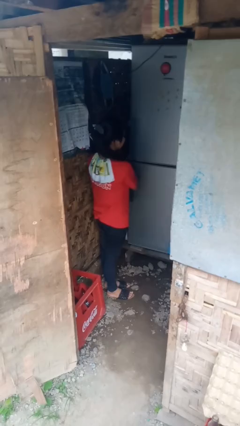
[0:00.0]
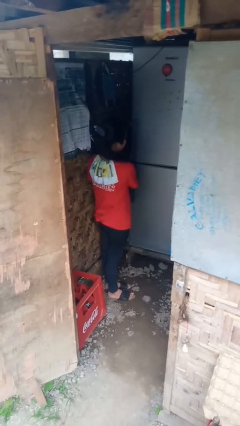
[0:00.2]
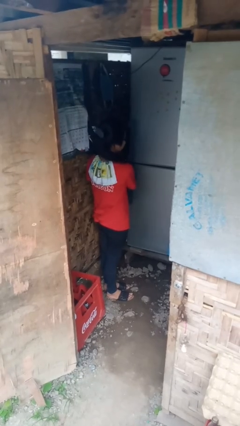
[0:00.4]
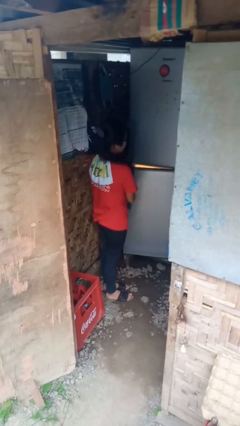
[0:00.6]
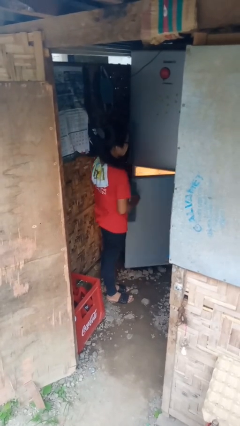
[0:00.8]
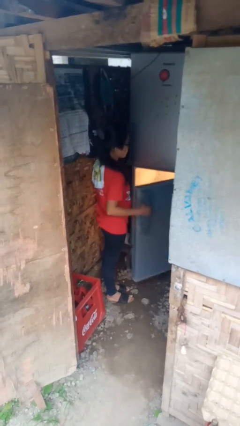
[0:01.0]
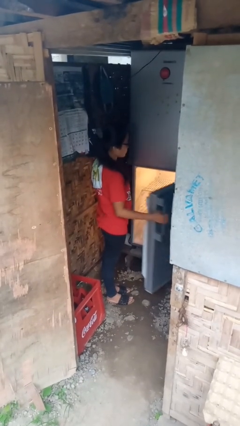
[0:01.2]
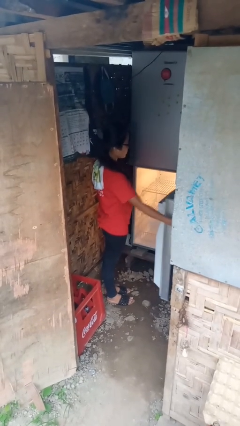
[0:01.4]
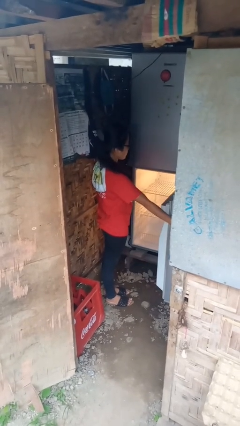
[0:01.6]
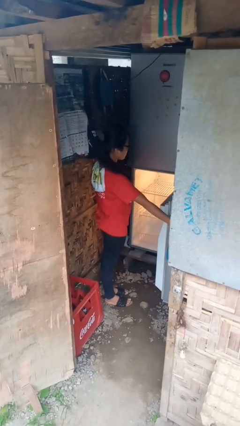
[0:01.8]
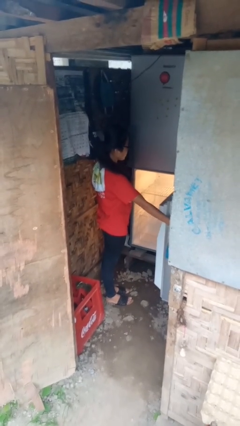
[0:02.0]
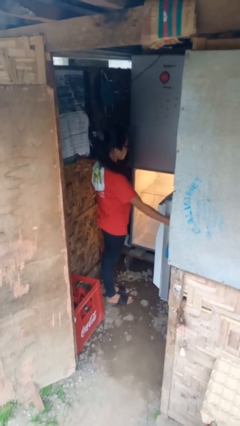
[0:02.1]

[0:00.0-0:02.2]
person opens refrigerator

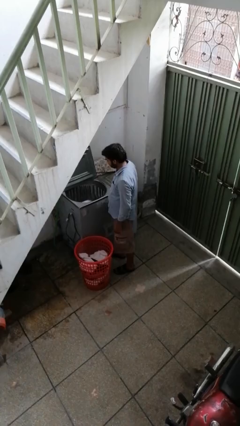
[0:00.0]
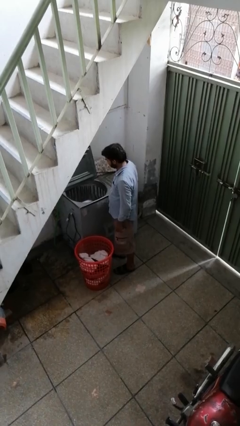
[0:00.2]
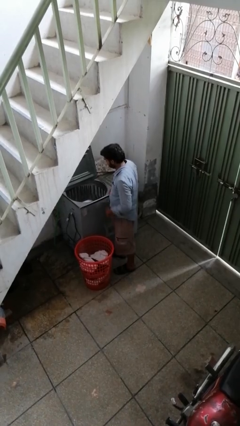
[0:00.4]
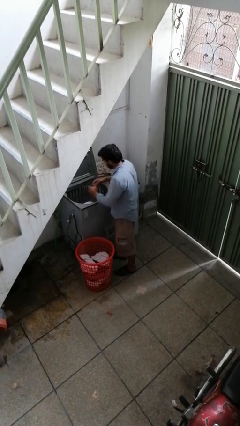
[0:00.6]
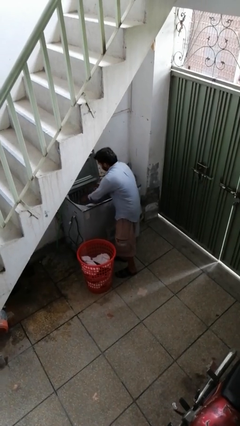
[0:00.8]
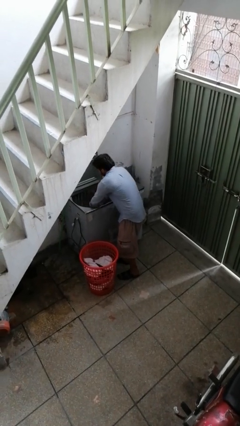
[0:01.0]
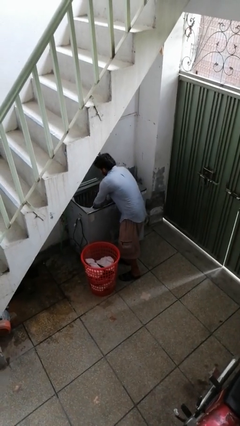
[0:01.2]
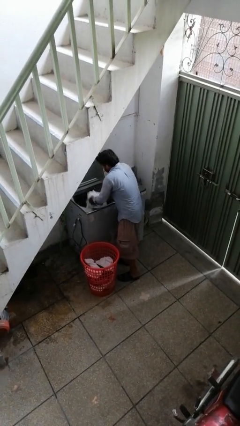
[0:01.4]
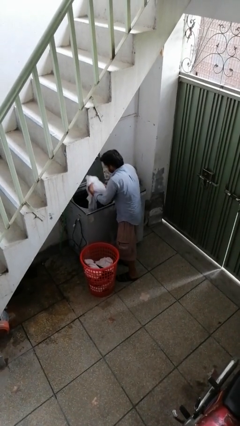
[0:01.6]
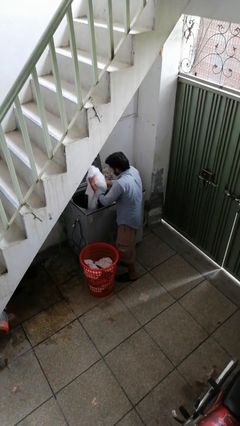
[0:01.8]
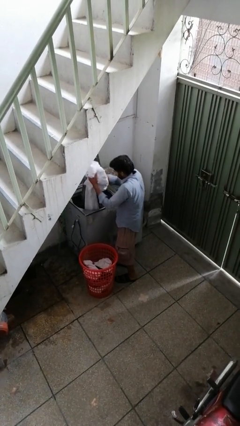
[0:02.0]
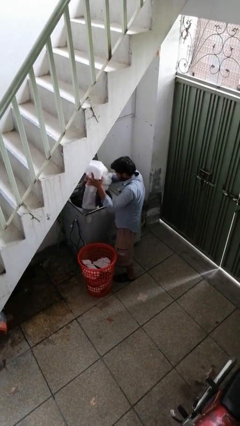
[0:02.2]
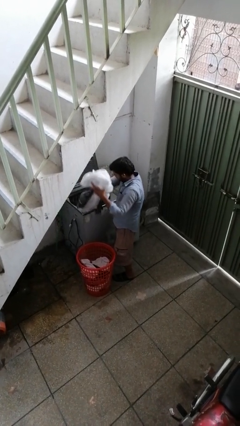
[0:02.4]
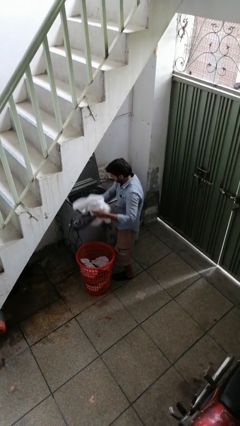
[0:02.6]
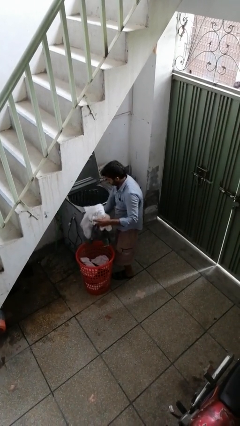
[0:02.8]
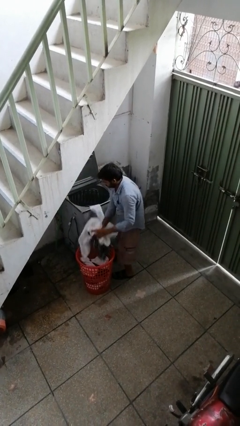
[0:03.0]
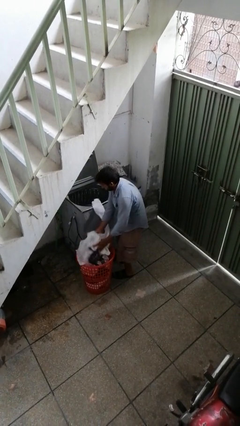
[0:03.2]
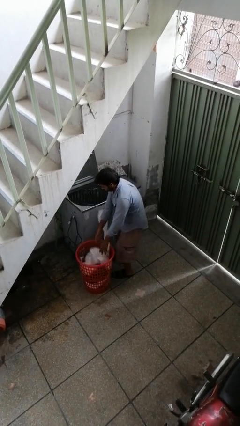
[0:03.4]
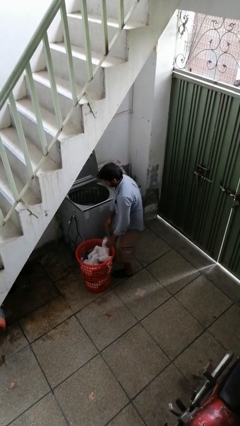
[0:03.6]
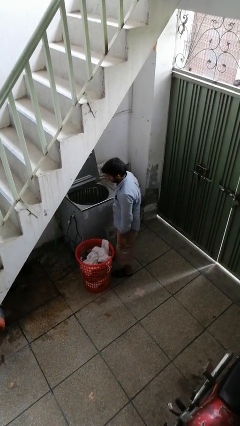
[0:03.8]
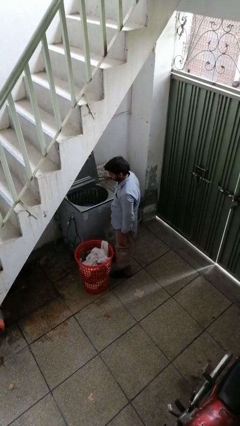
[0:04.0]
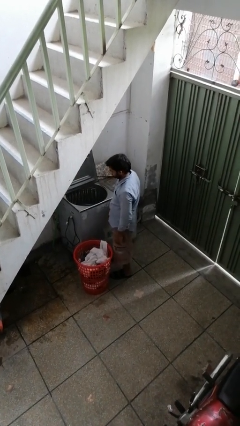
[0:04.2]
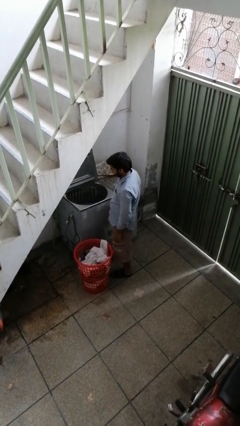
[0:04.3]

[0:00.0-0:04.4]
person unloads clotheswasher

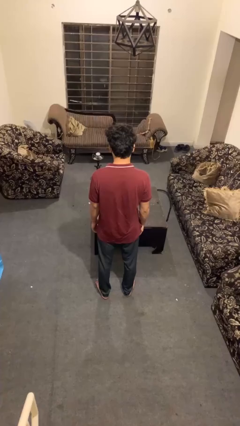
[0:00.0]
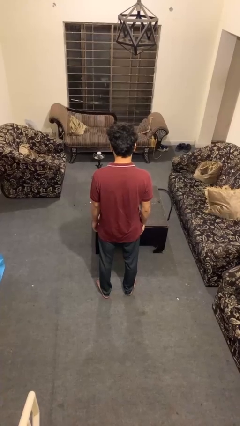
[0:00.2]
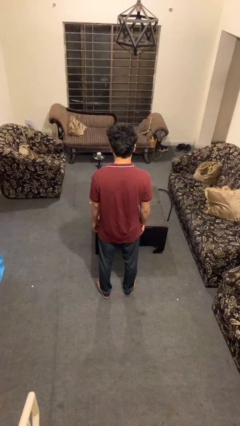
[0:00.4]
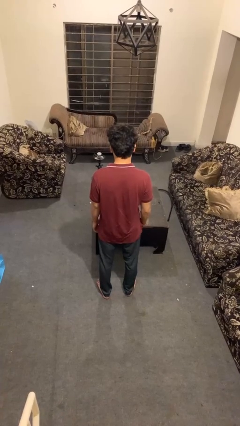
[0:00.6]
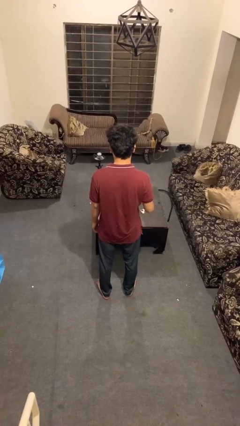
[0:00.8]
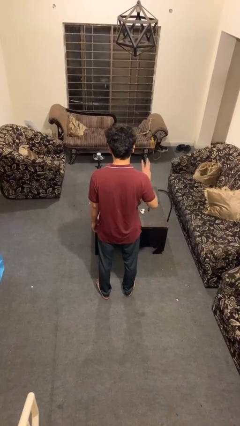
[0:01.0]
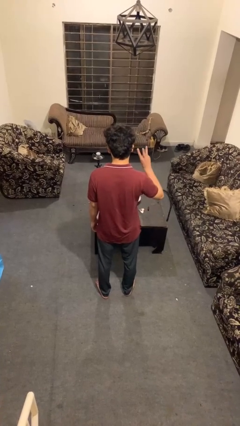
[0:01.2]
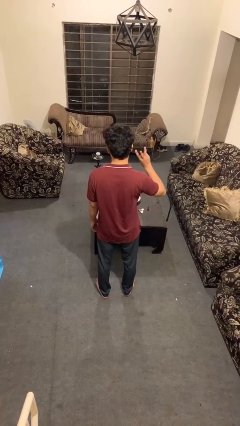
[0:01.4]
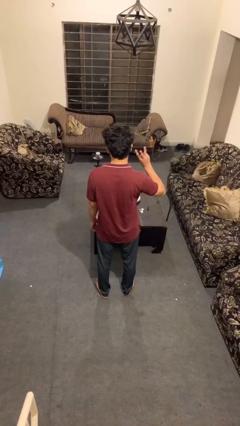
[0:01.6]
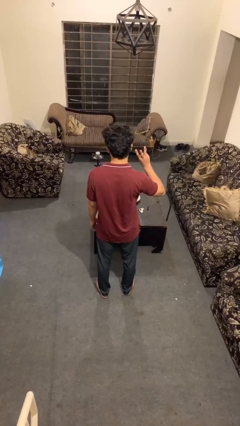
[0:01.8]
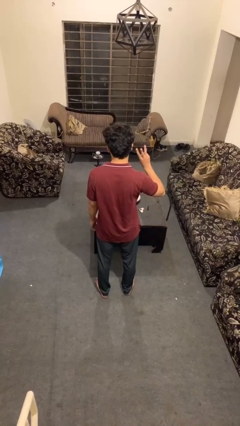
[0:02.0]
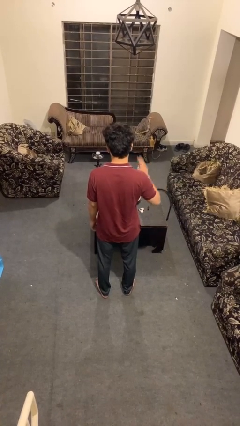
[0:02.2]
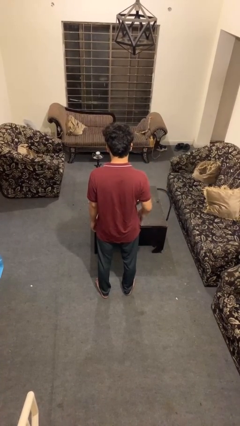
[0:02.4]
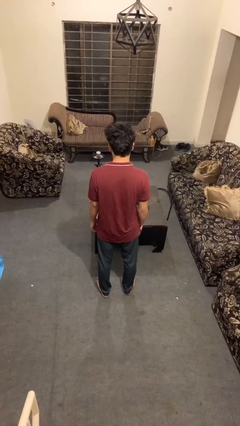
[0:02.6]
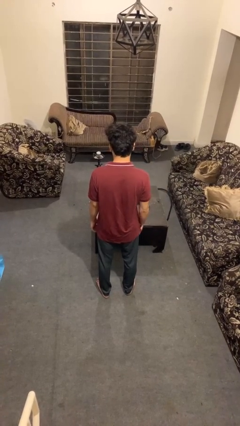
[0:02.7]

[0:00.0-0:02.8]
person gestures number three

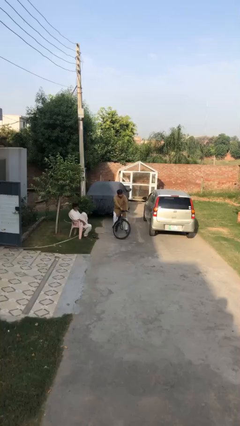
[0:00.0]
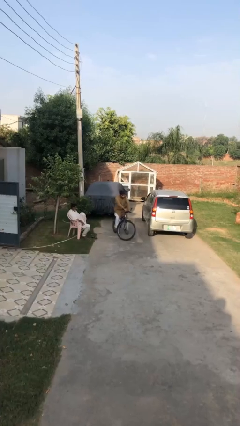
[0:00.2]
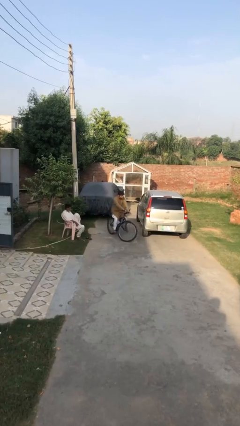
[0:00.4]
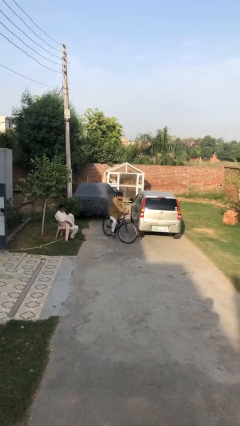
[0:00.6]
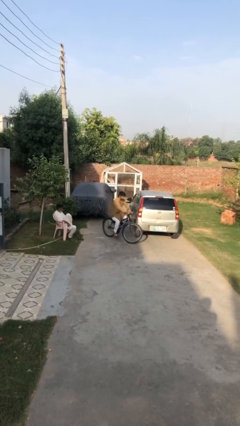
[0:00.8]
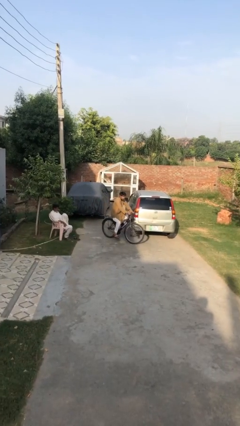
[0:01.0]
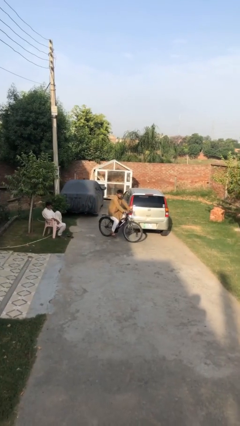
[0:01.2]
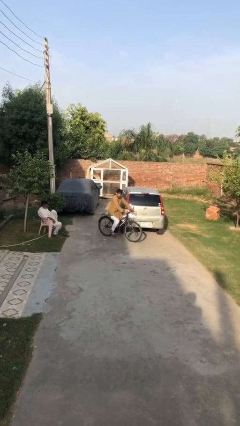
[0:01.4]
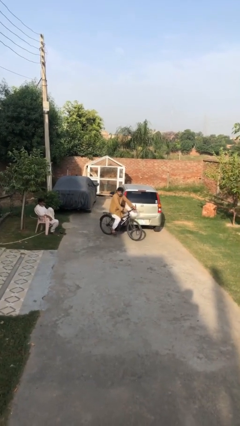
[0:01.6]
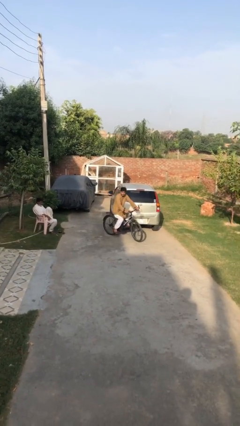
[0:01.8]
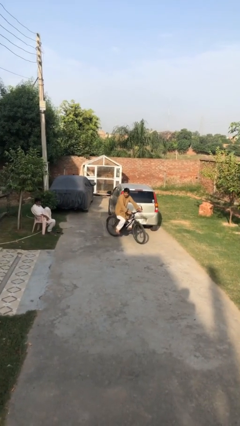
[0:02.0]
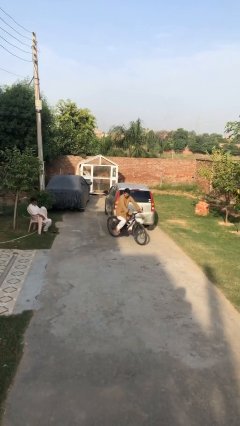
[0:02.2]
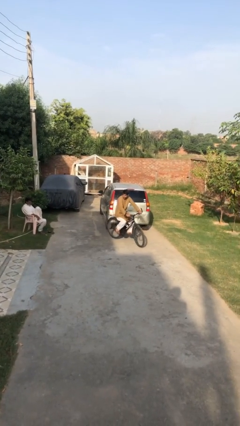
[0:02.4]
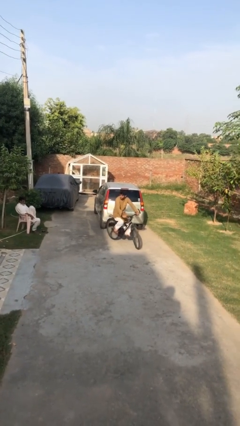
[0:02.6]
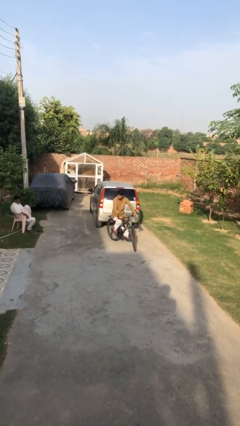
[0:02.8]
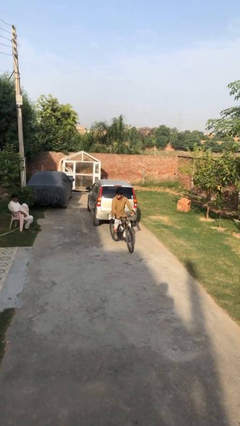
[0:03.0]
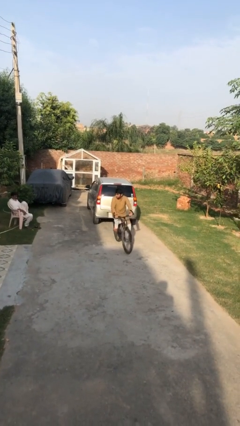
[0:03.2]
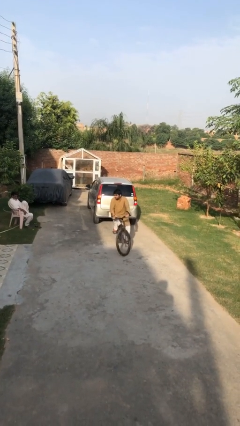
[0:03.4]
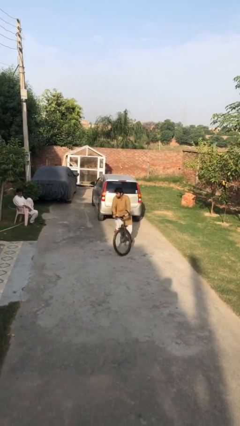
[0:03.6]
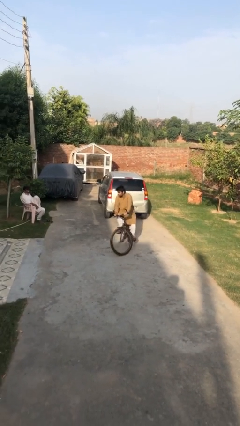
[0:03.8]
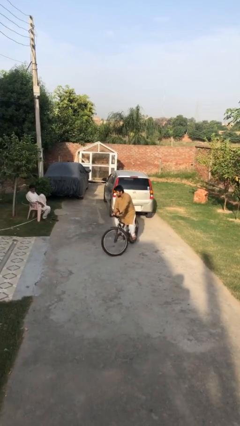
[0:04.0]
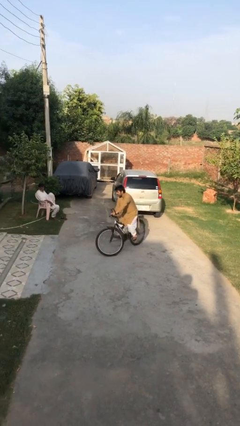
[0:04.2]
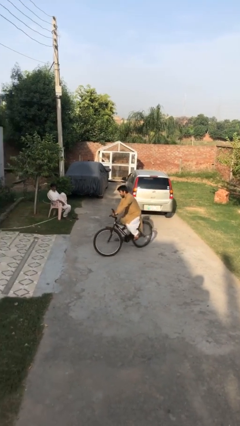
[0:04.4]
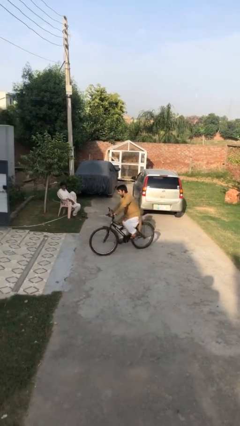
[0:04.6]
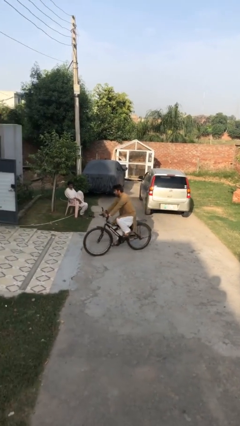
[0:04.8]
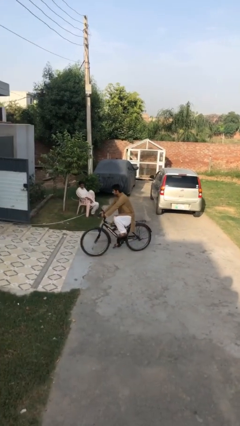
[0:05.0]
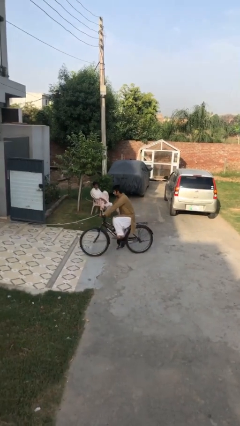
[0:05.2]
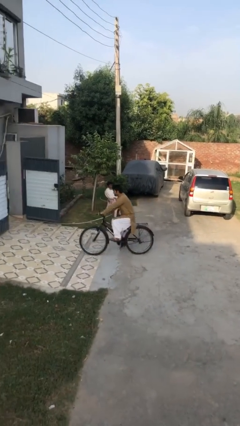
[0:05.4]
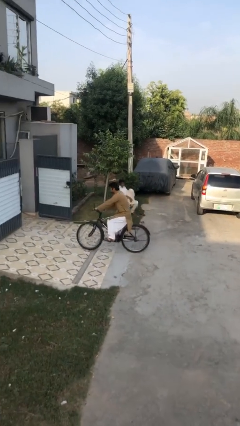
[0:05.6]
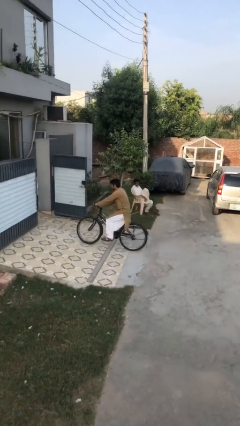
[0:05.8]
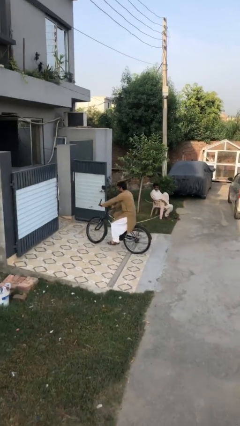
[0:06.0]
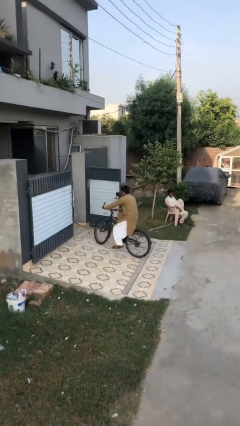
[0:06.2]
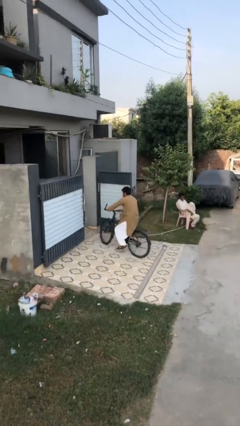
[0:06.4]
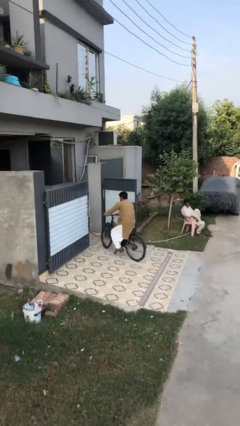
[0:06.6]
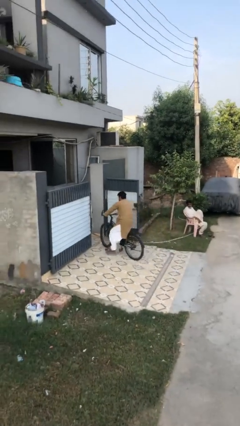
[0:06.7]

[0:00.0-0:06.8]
person rides bicycle

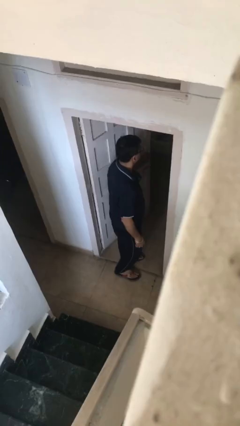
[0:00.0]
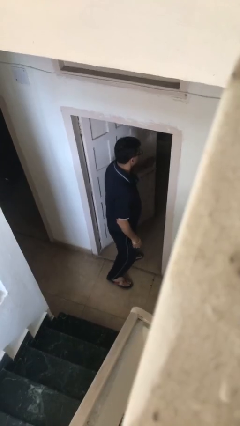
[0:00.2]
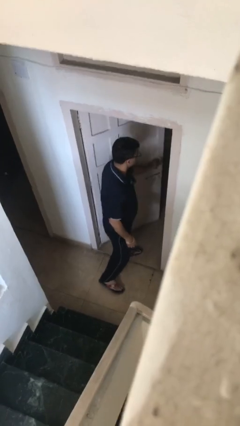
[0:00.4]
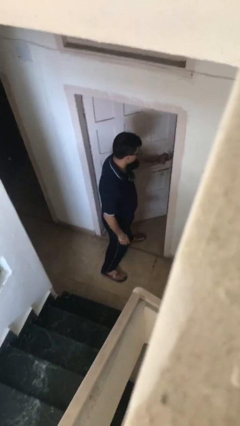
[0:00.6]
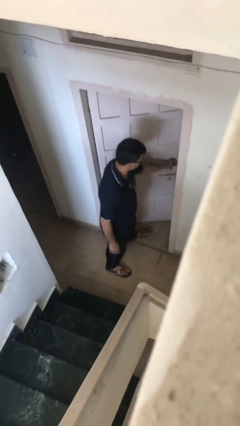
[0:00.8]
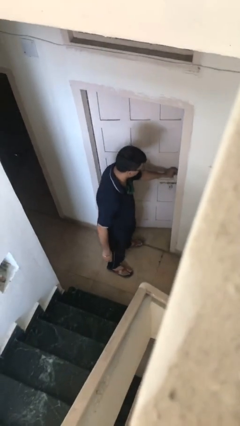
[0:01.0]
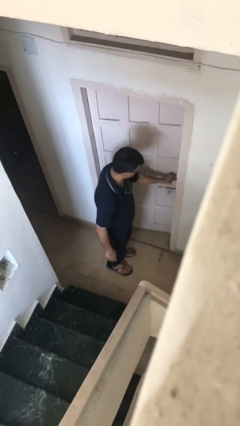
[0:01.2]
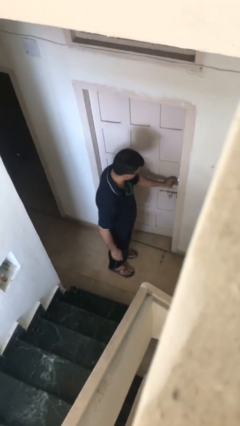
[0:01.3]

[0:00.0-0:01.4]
person closes facility door
